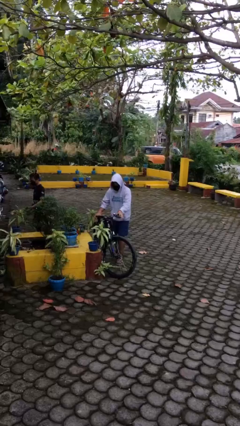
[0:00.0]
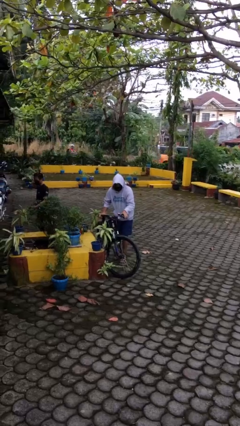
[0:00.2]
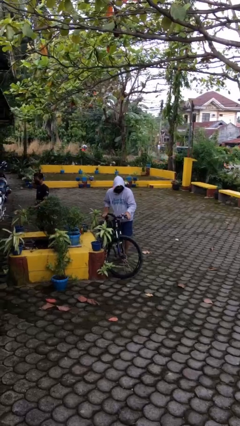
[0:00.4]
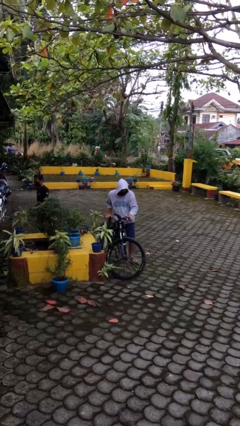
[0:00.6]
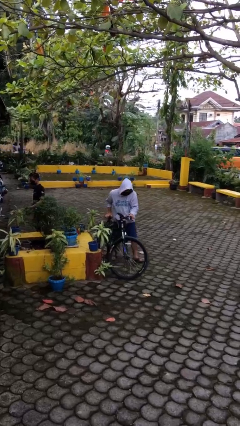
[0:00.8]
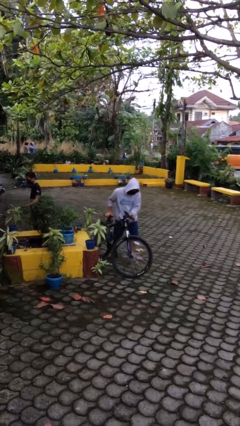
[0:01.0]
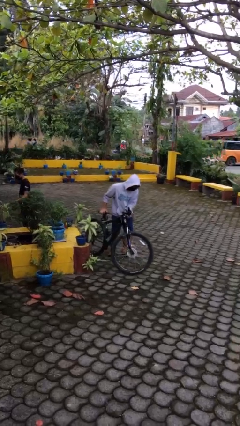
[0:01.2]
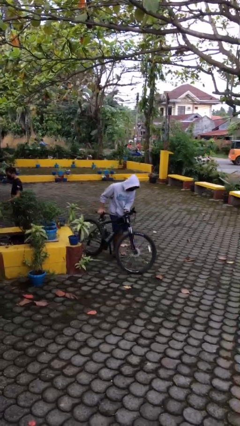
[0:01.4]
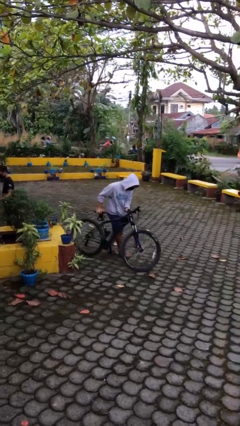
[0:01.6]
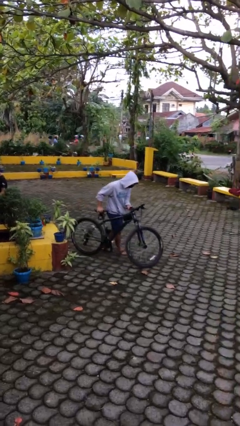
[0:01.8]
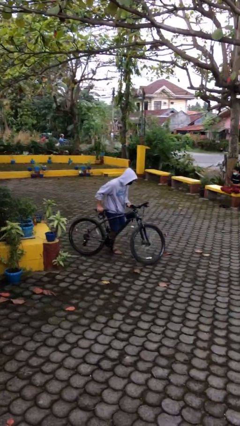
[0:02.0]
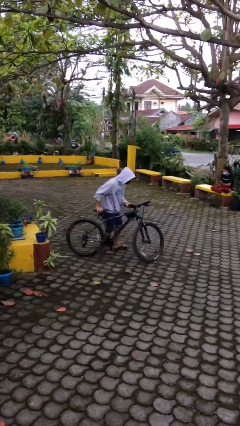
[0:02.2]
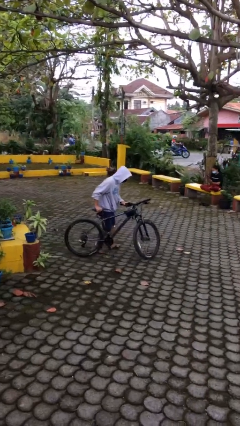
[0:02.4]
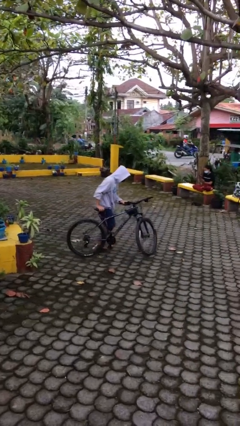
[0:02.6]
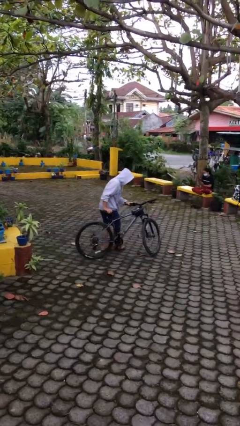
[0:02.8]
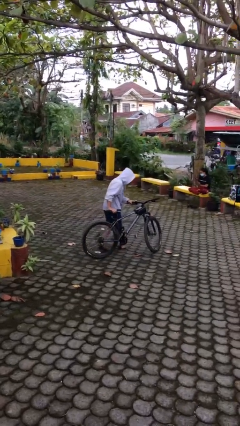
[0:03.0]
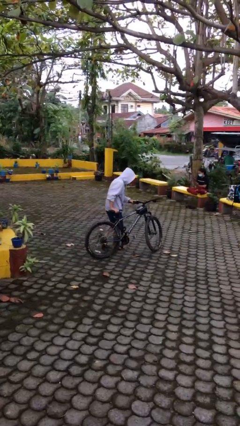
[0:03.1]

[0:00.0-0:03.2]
person steals object from person

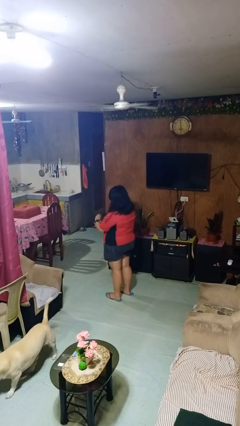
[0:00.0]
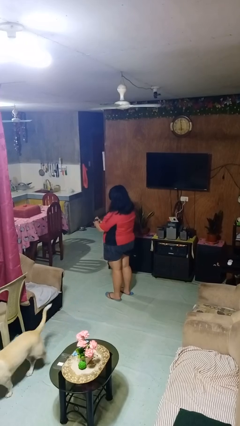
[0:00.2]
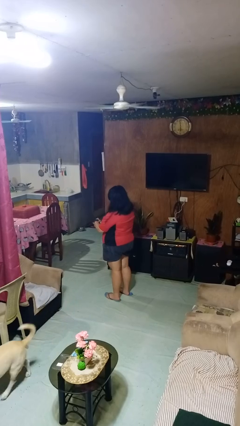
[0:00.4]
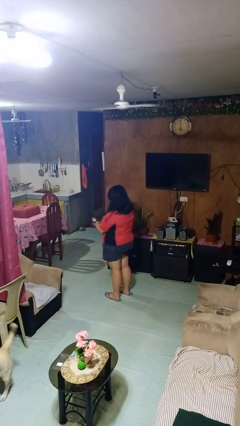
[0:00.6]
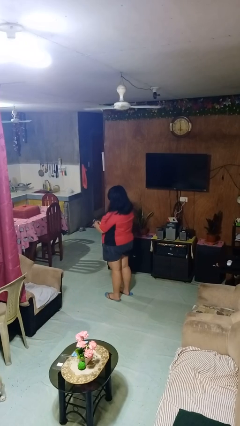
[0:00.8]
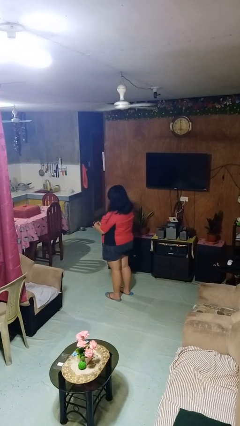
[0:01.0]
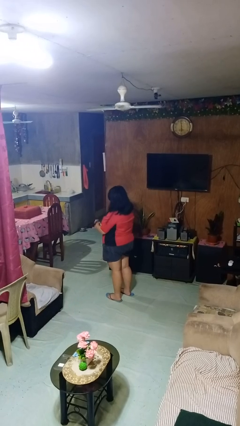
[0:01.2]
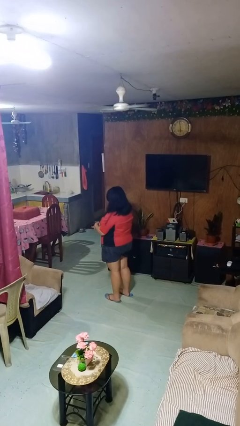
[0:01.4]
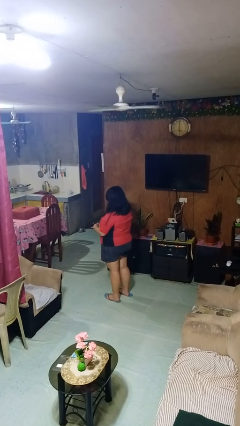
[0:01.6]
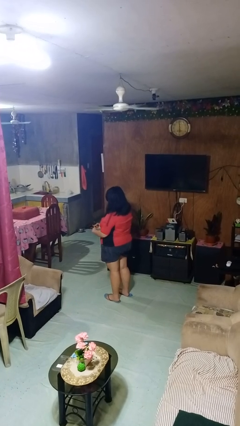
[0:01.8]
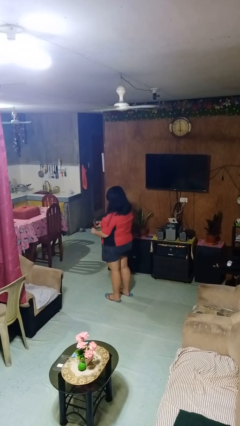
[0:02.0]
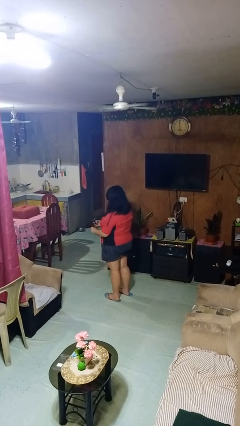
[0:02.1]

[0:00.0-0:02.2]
person takes off wristwatch

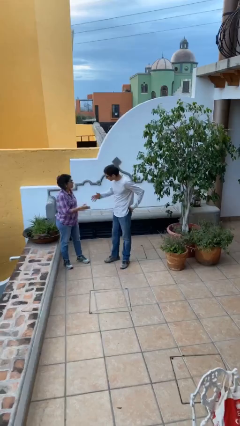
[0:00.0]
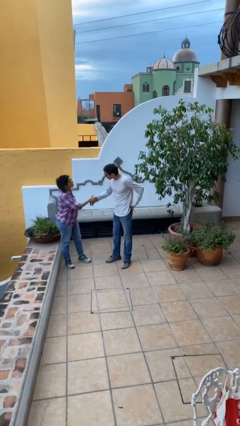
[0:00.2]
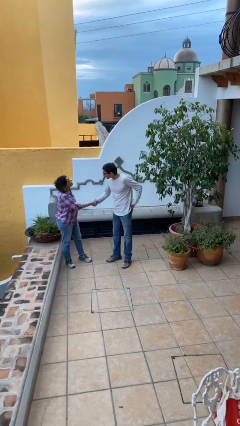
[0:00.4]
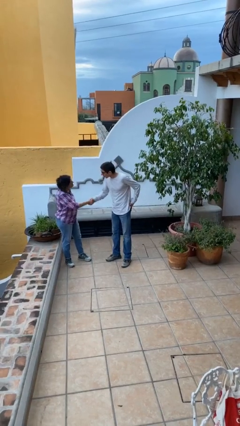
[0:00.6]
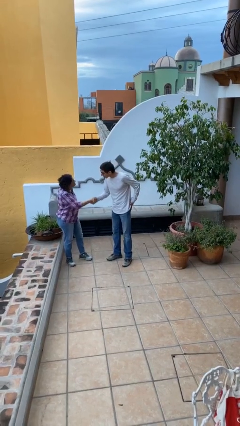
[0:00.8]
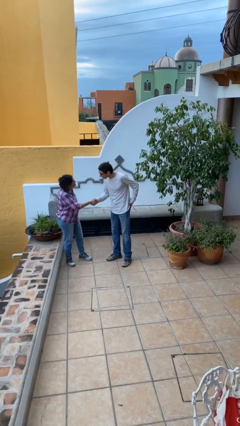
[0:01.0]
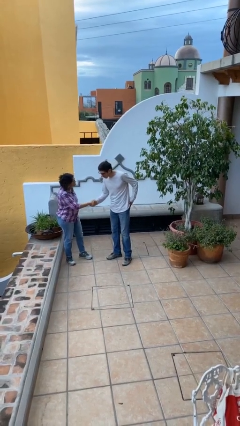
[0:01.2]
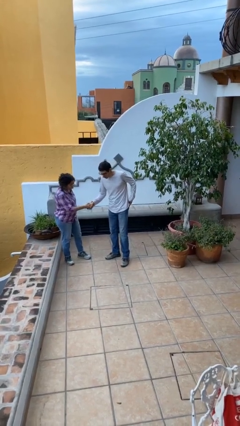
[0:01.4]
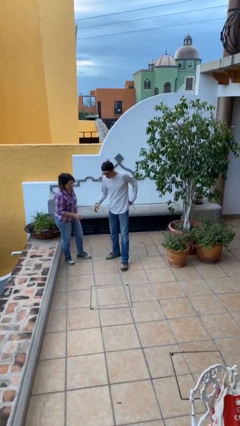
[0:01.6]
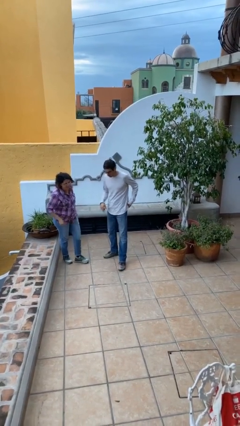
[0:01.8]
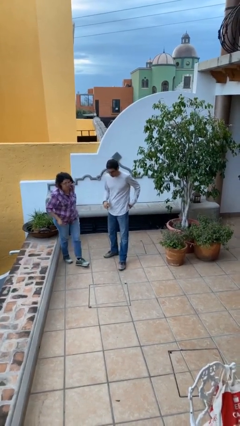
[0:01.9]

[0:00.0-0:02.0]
person shakes hand

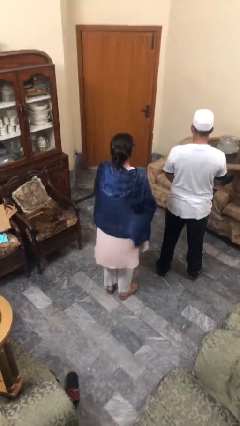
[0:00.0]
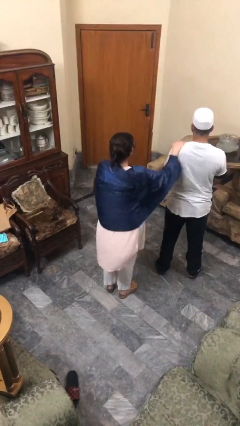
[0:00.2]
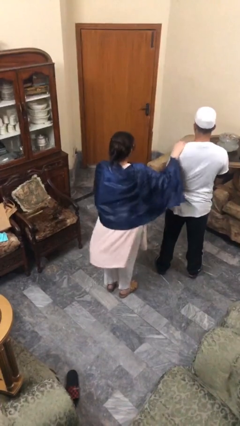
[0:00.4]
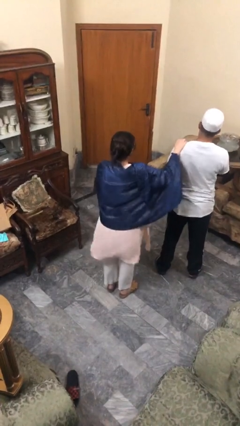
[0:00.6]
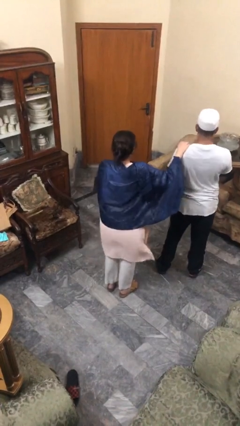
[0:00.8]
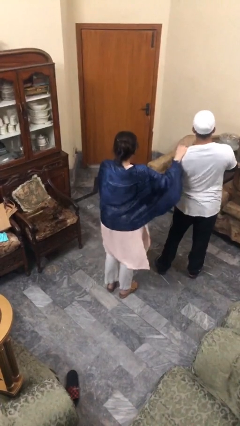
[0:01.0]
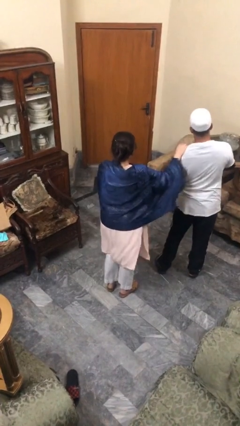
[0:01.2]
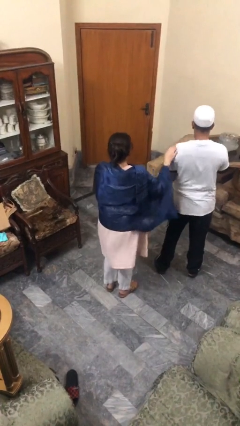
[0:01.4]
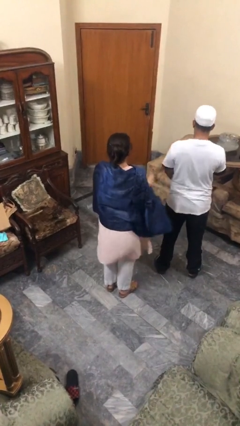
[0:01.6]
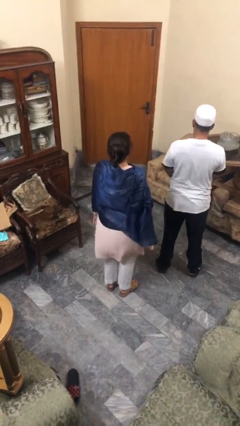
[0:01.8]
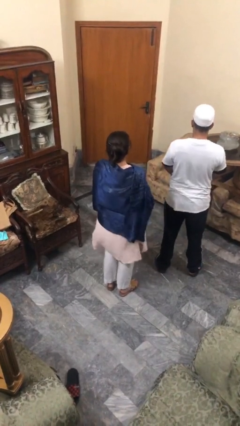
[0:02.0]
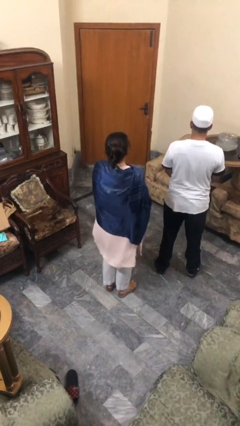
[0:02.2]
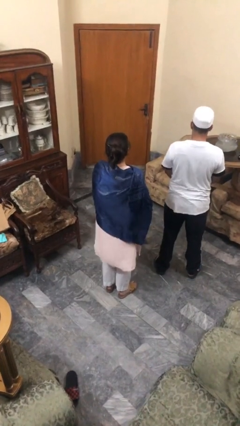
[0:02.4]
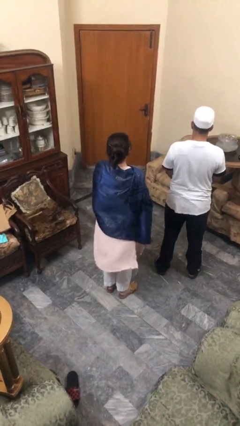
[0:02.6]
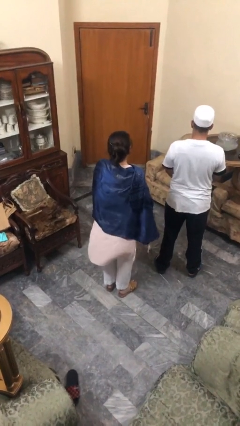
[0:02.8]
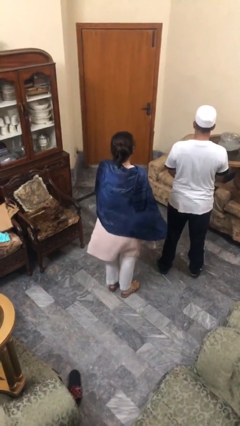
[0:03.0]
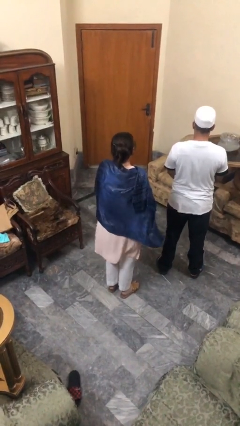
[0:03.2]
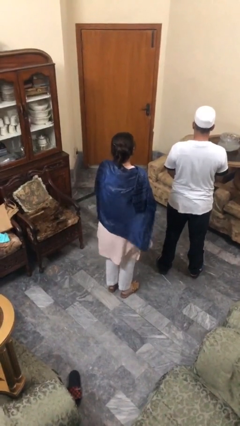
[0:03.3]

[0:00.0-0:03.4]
person pounds shoulders of person

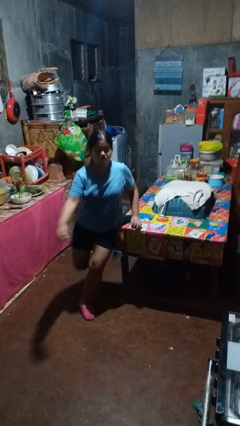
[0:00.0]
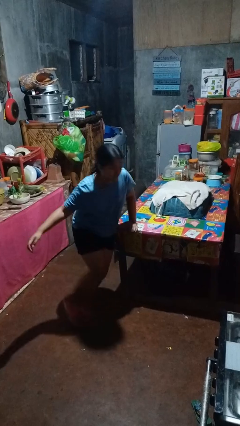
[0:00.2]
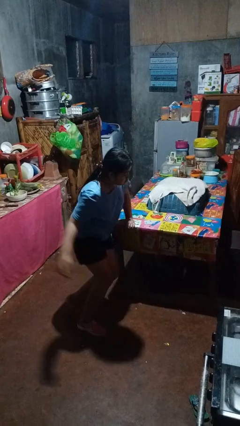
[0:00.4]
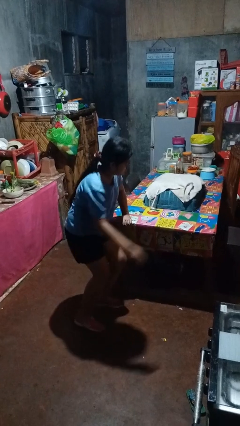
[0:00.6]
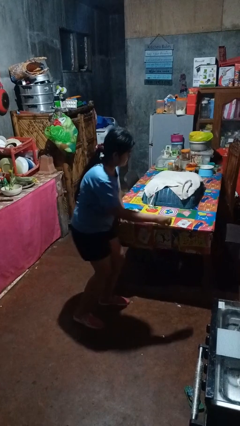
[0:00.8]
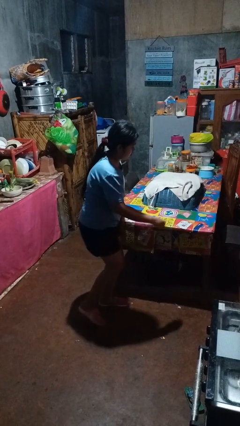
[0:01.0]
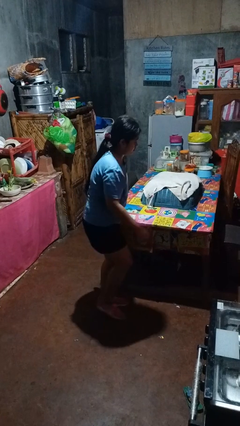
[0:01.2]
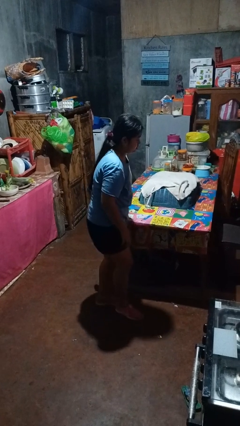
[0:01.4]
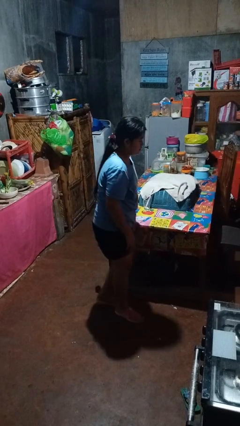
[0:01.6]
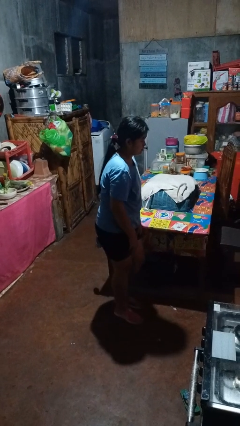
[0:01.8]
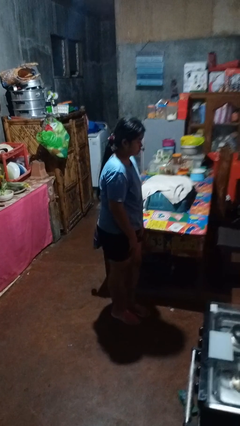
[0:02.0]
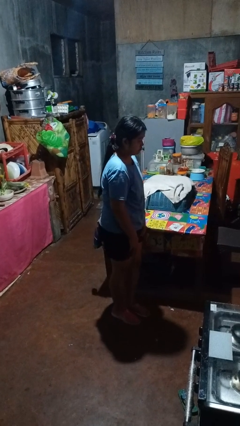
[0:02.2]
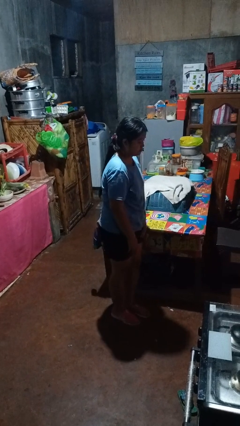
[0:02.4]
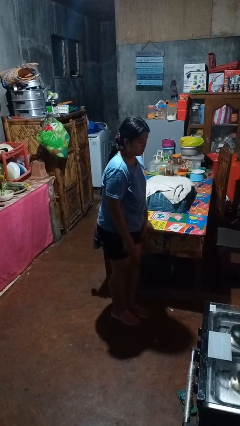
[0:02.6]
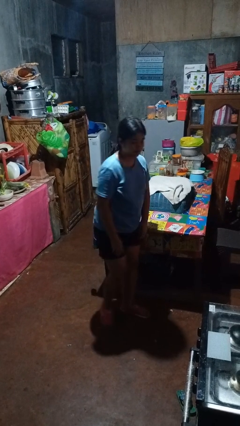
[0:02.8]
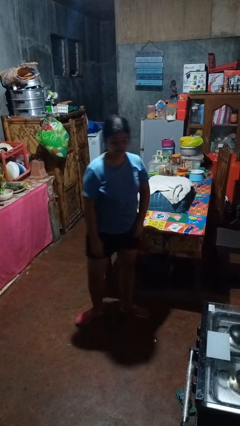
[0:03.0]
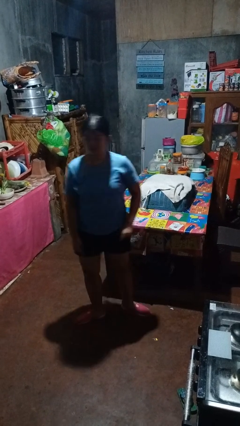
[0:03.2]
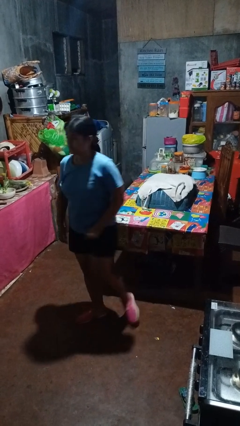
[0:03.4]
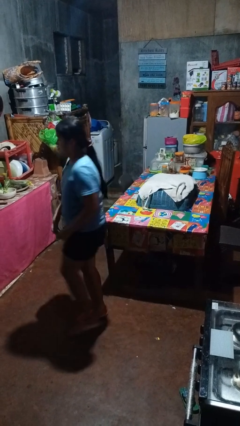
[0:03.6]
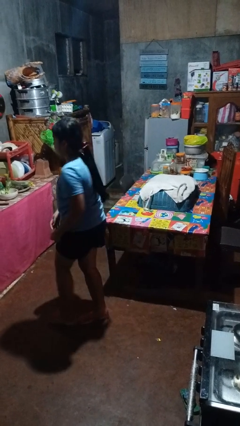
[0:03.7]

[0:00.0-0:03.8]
person bumps into table

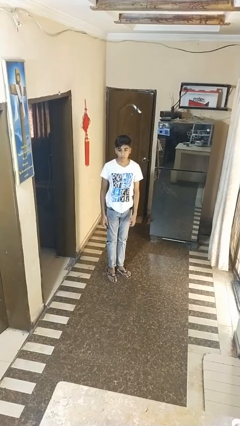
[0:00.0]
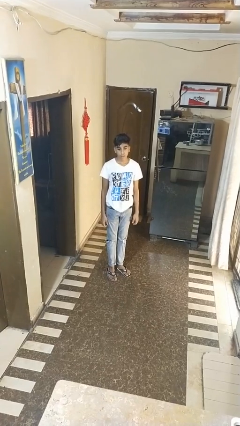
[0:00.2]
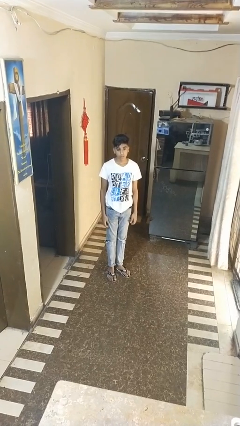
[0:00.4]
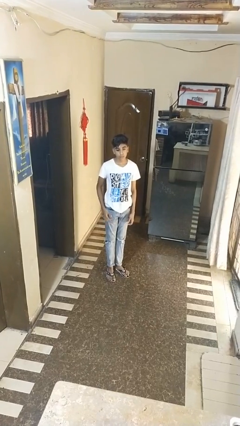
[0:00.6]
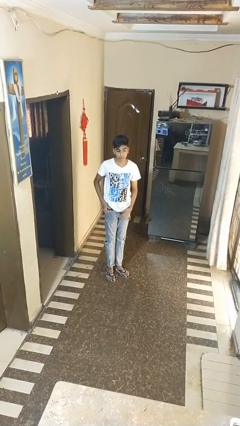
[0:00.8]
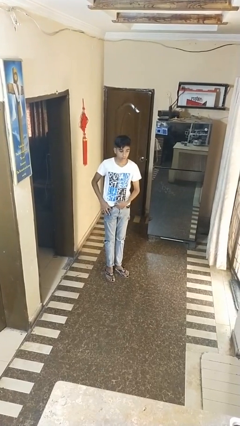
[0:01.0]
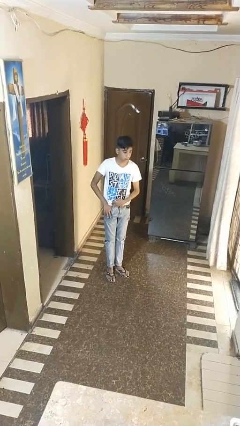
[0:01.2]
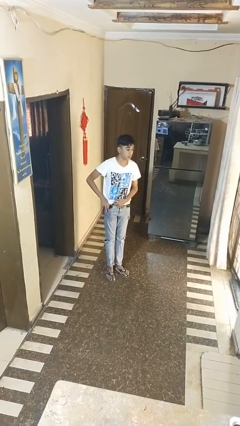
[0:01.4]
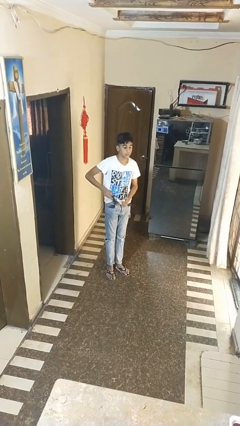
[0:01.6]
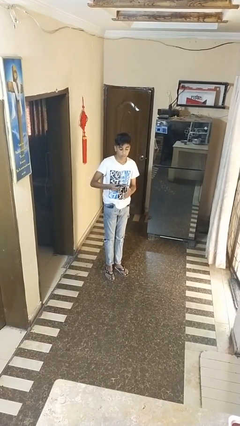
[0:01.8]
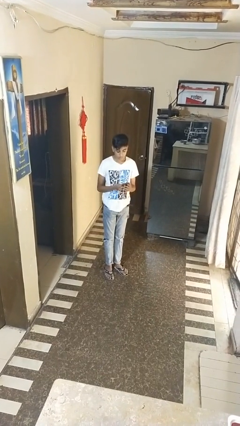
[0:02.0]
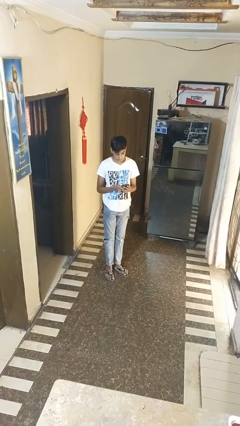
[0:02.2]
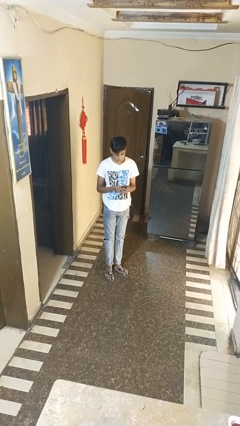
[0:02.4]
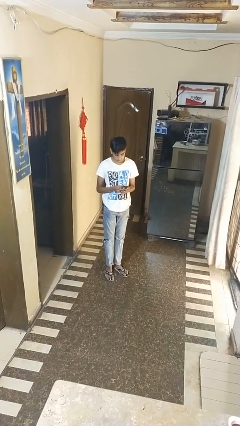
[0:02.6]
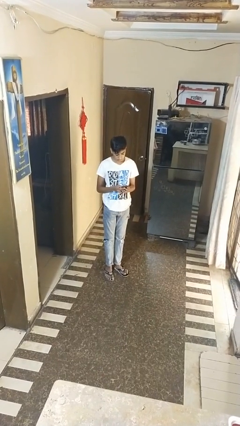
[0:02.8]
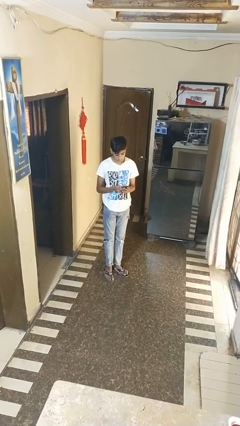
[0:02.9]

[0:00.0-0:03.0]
person takes phone from pocket
